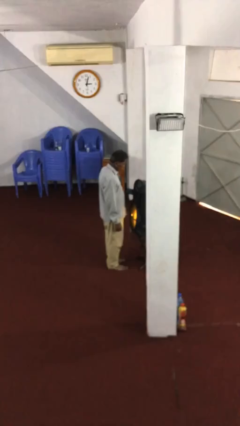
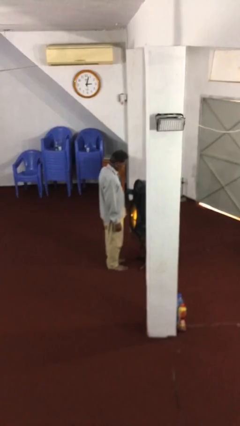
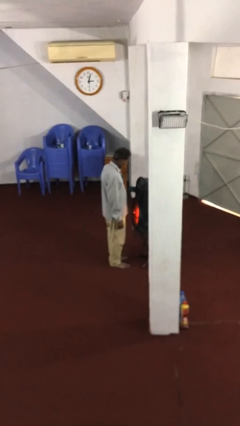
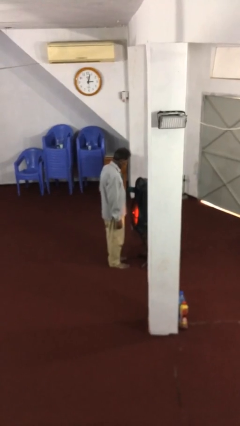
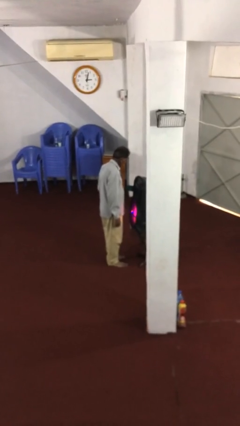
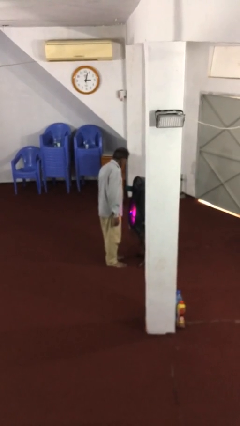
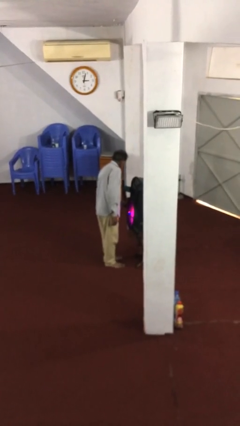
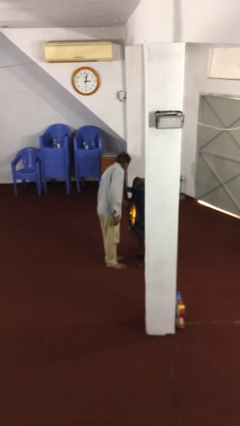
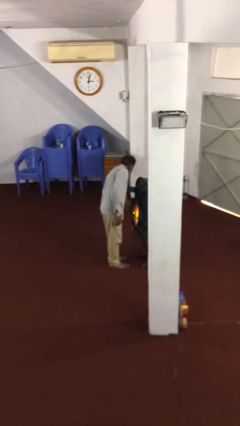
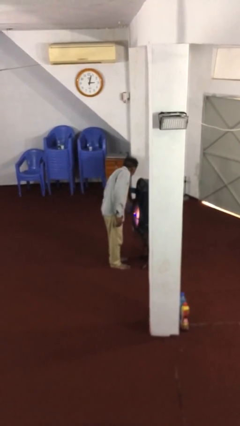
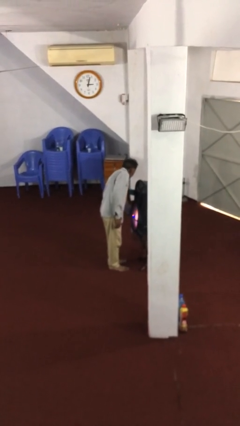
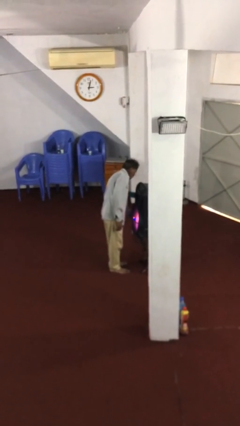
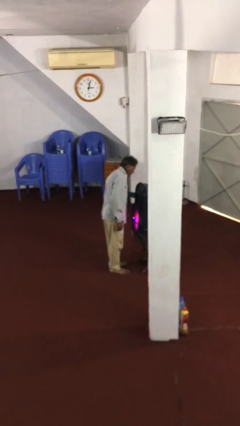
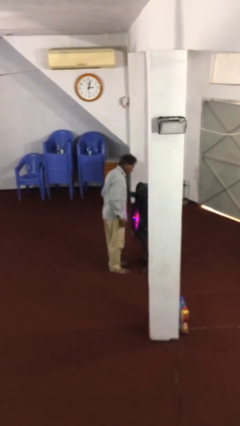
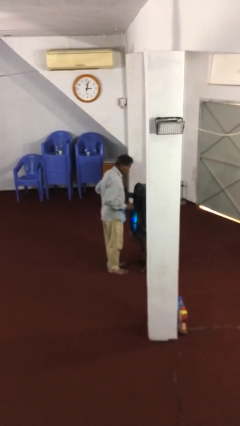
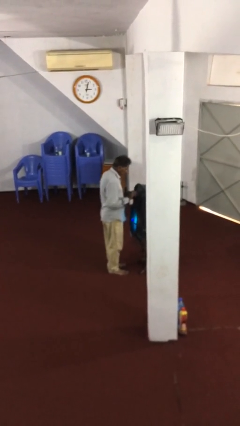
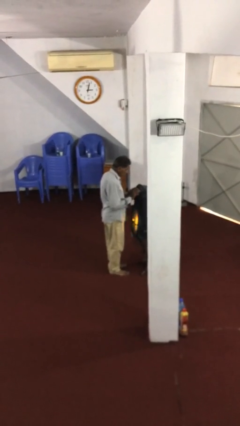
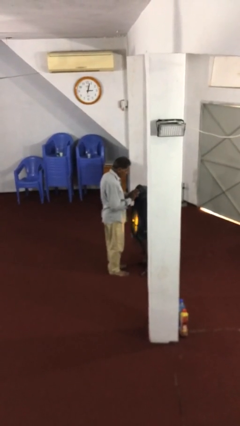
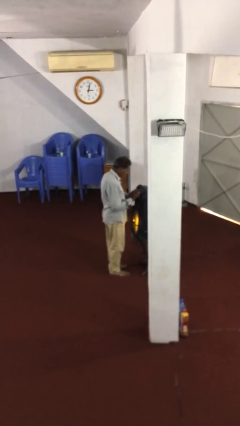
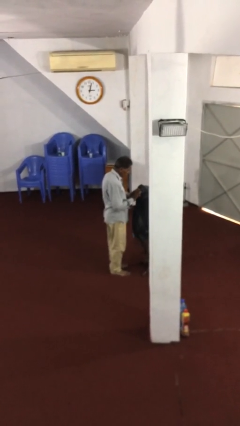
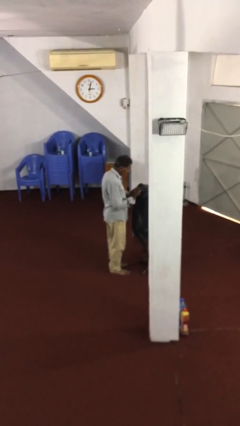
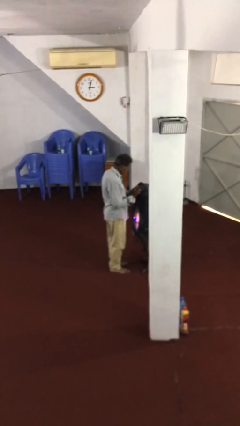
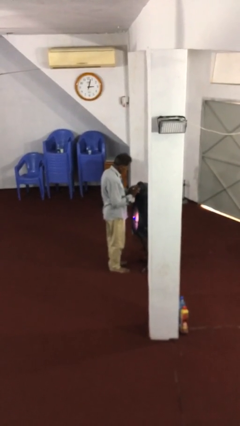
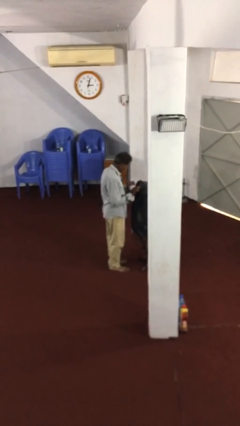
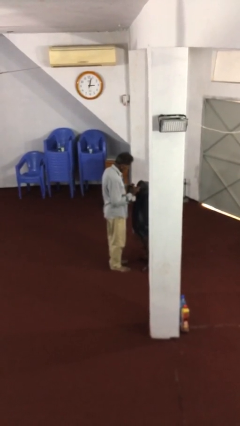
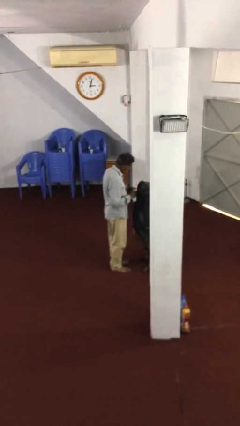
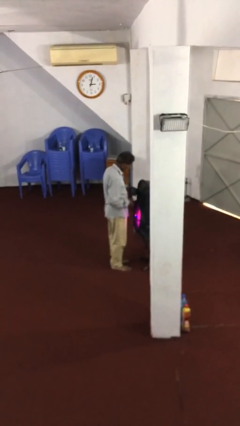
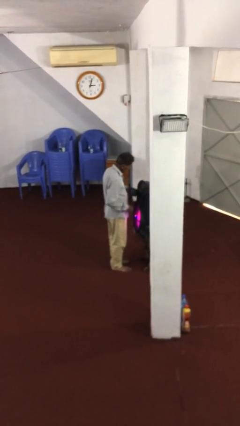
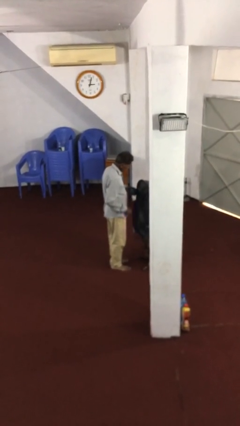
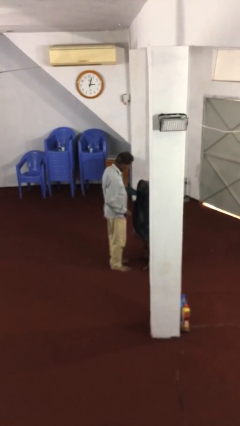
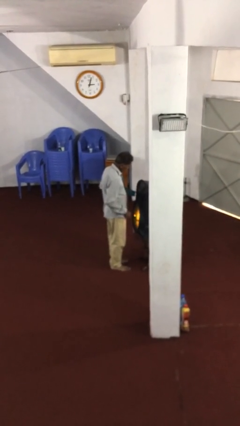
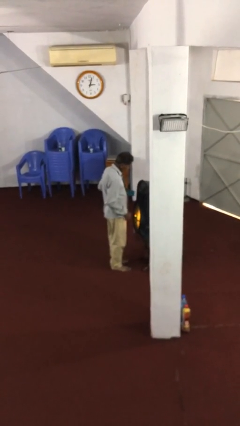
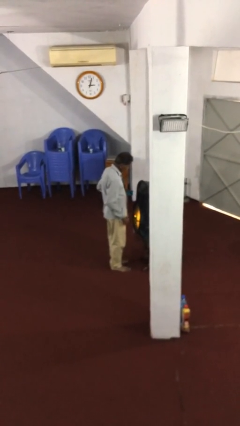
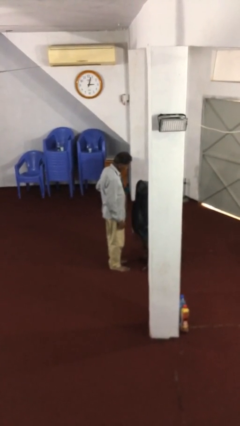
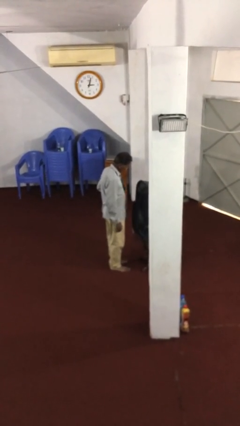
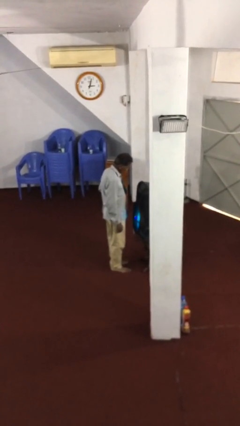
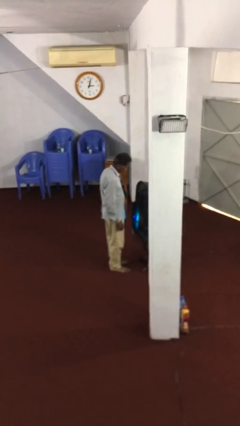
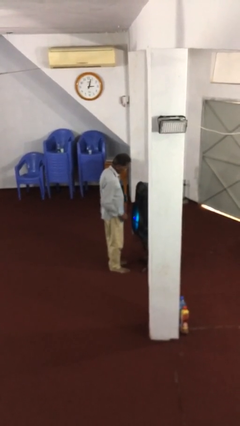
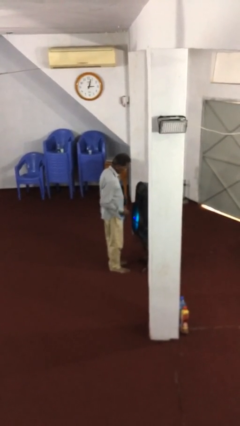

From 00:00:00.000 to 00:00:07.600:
person purchases from machine

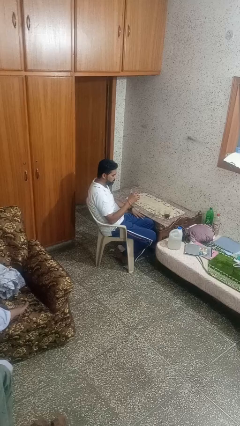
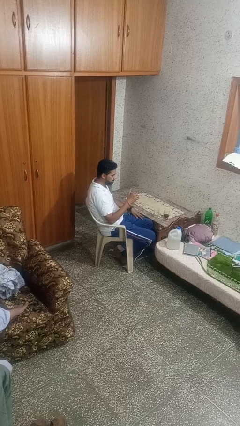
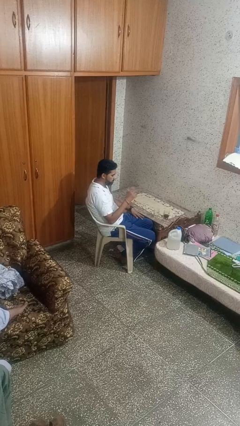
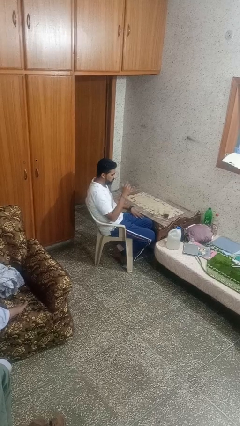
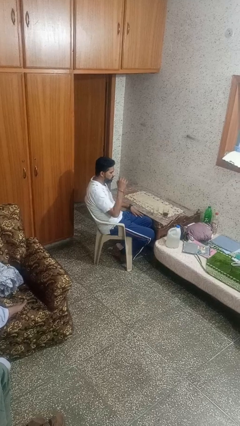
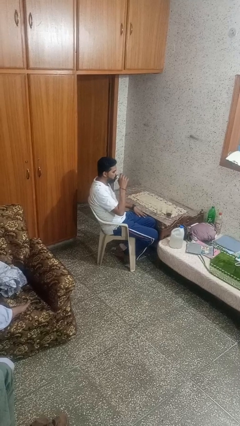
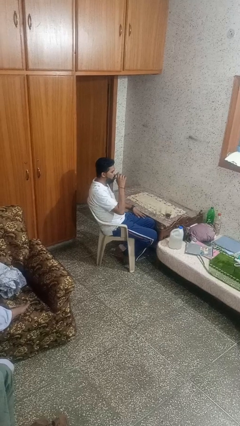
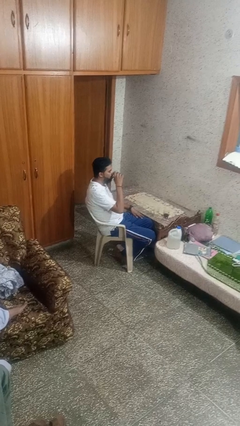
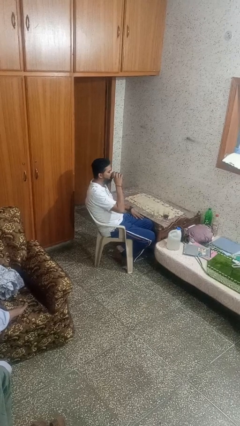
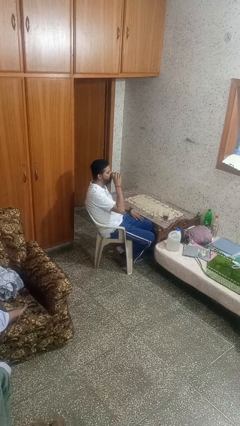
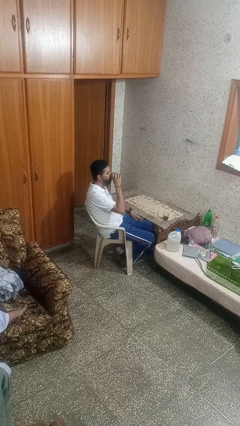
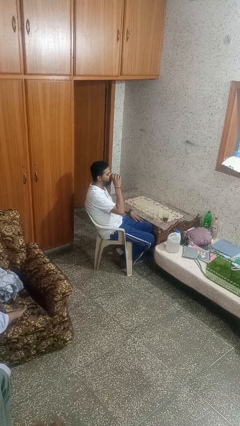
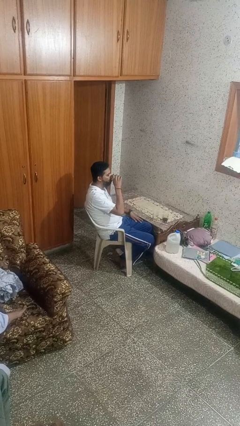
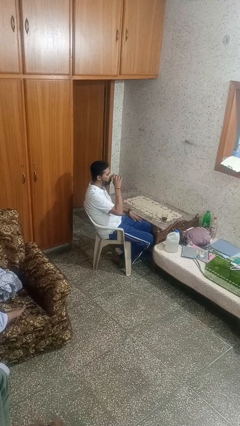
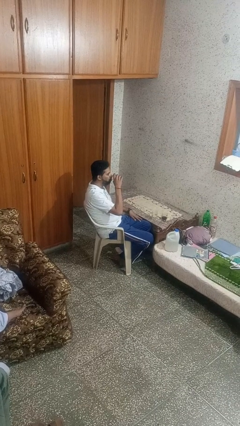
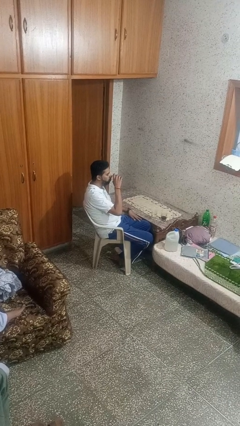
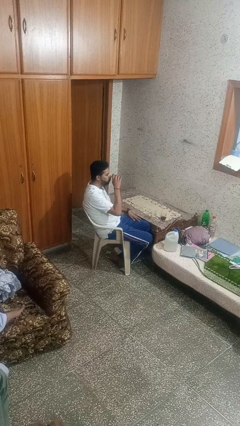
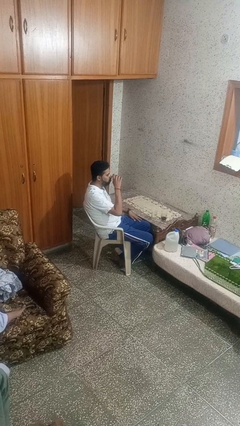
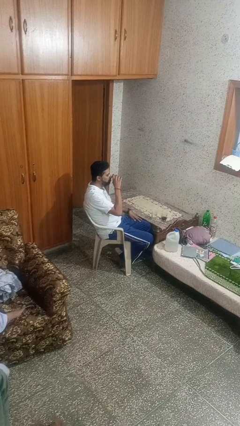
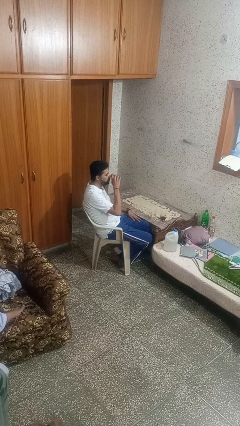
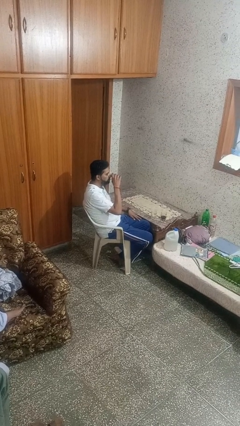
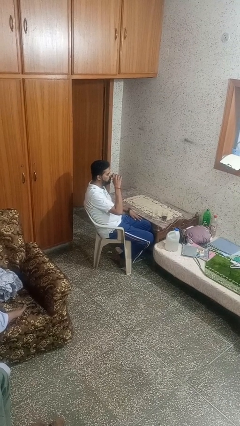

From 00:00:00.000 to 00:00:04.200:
person drinks from shotglass

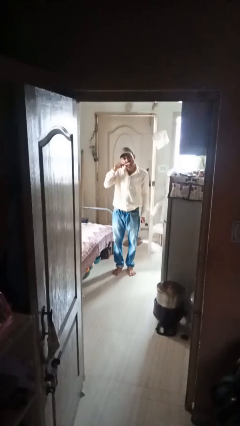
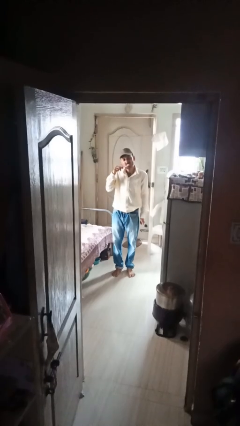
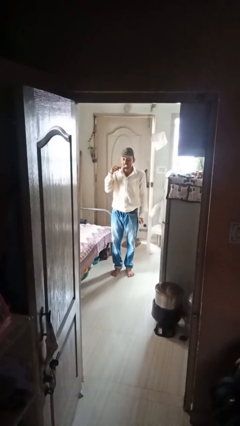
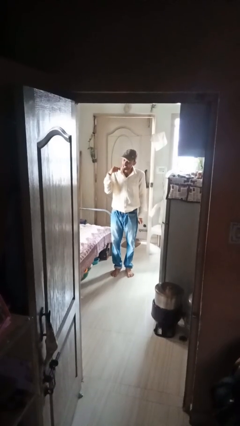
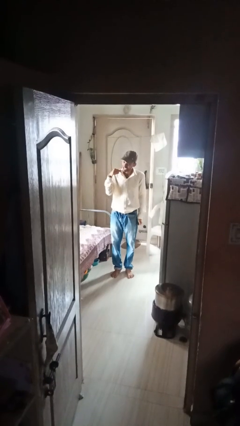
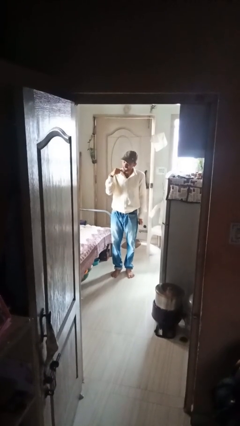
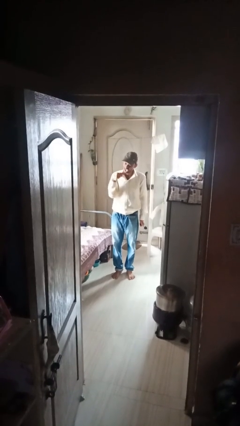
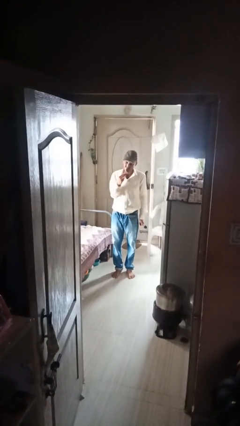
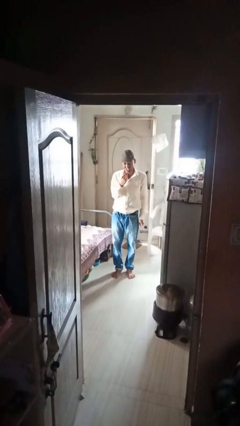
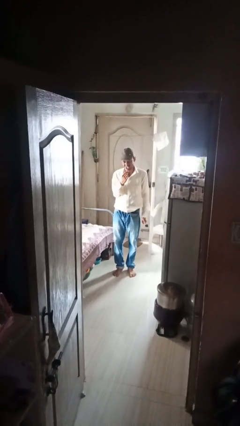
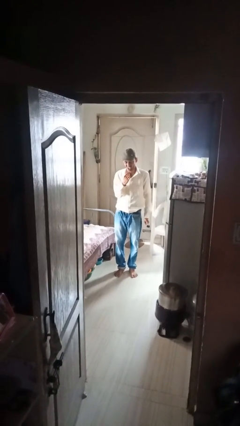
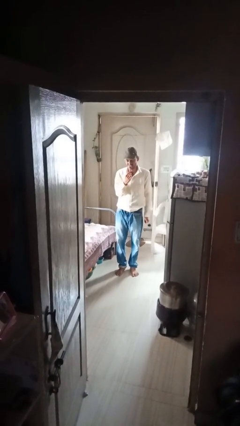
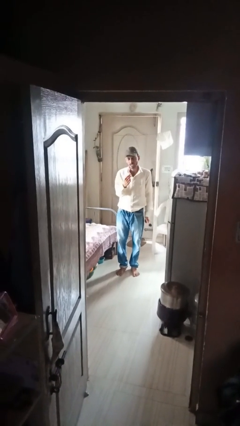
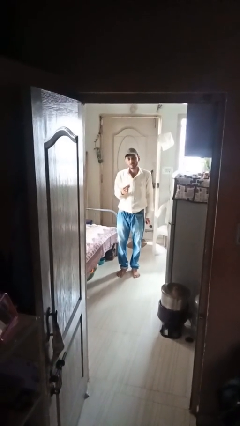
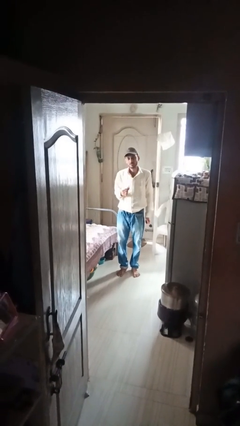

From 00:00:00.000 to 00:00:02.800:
person brushes teeth

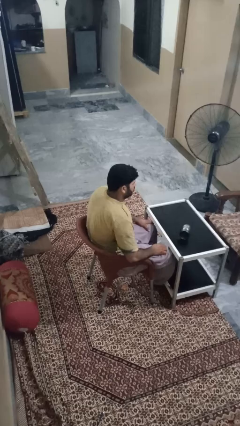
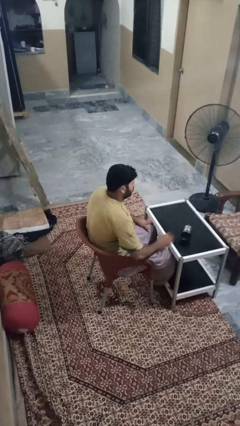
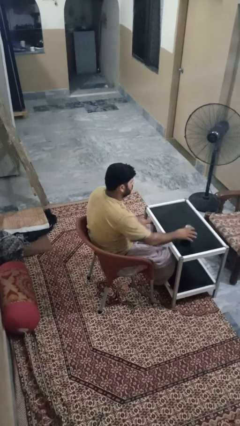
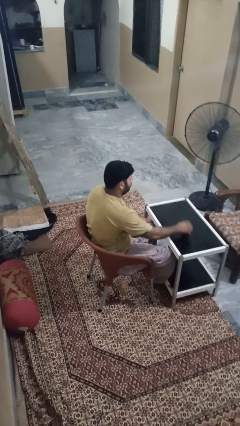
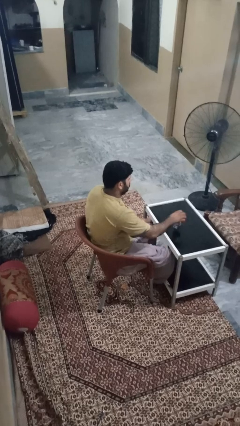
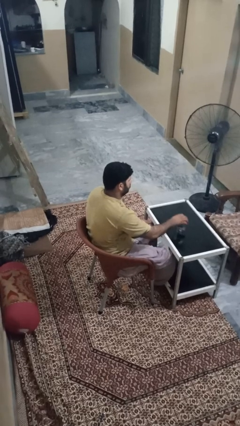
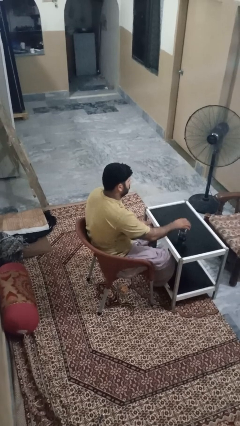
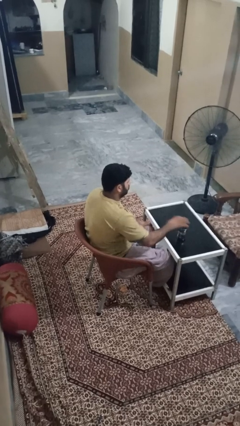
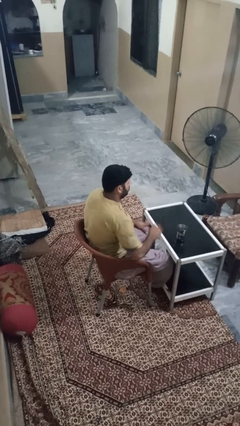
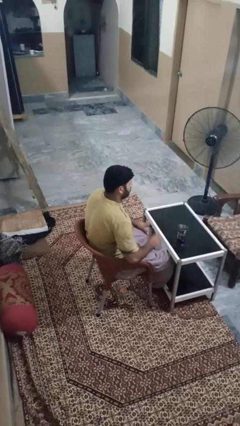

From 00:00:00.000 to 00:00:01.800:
person sets upright glass

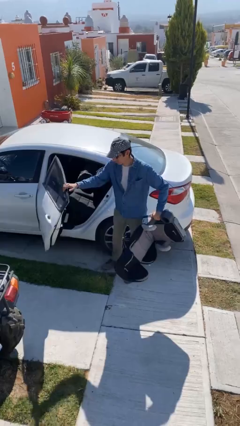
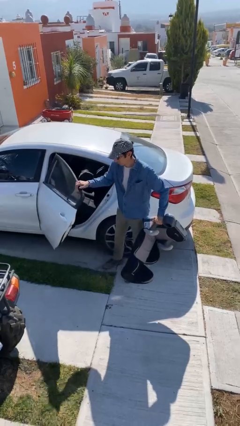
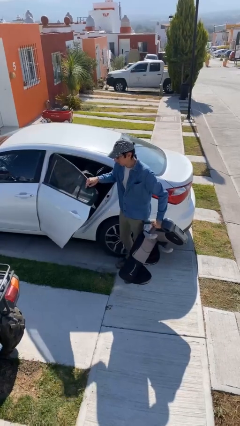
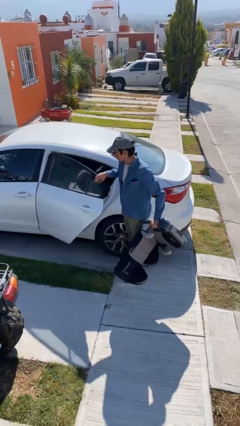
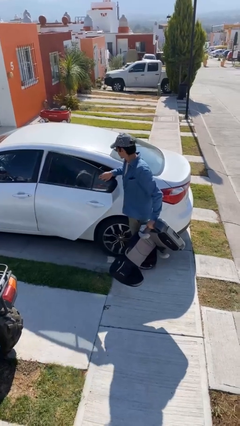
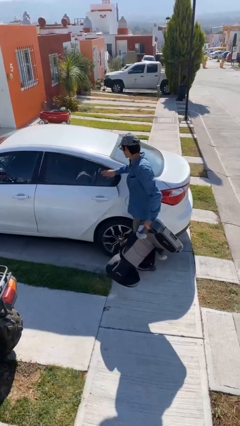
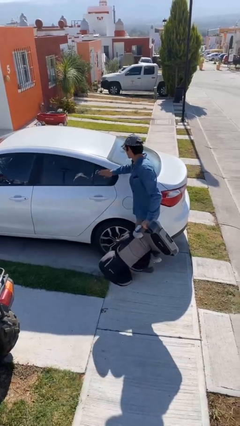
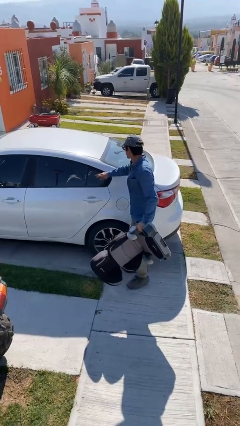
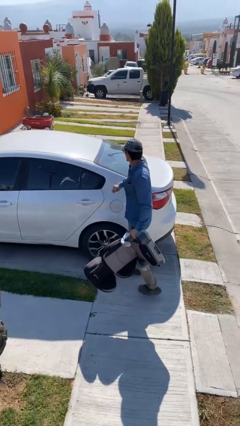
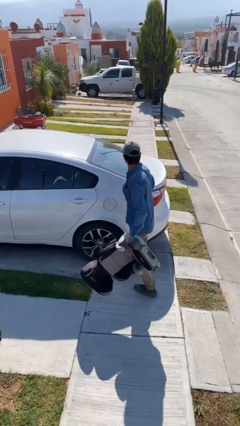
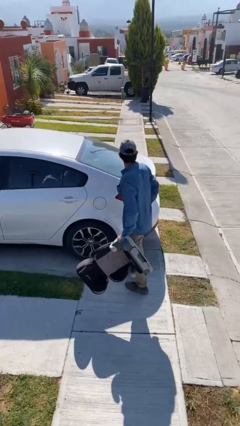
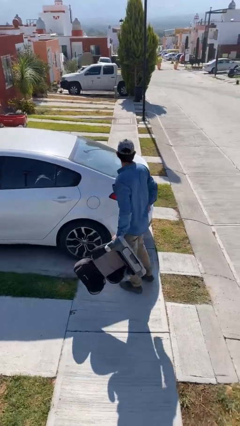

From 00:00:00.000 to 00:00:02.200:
person closes car door
